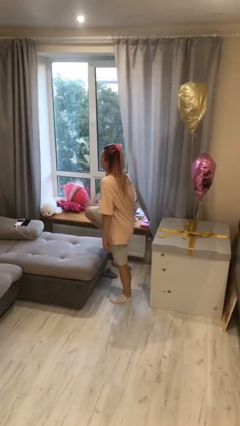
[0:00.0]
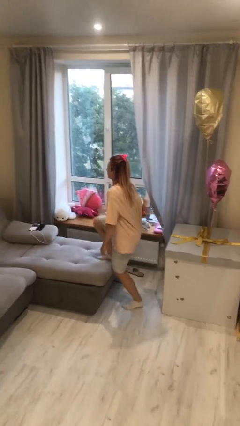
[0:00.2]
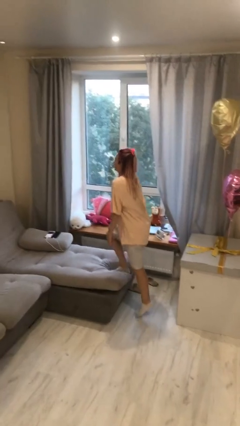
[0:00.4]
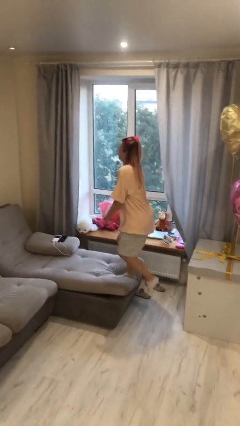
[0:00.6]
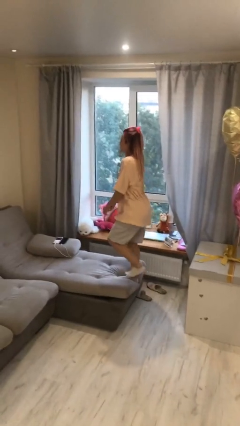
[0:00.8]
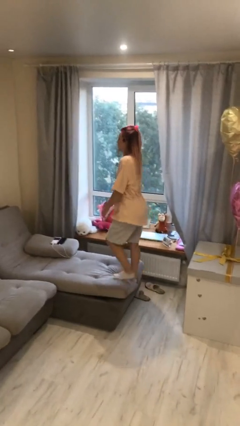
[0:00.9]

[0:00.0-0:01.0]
person climbs on couch

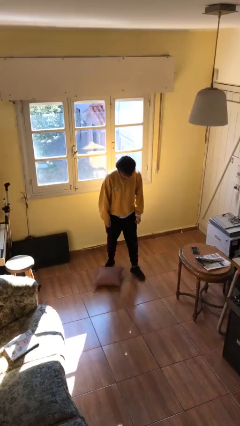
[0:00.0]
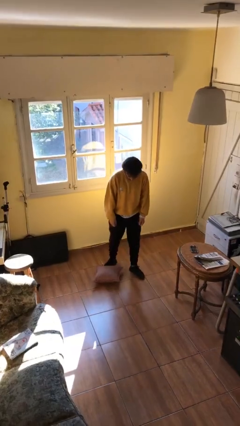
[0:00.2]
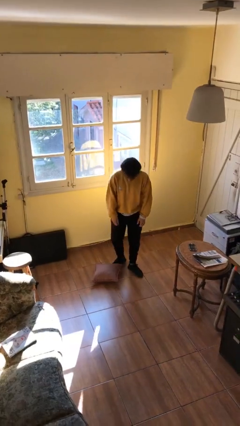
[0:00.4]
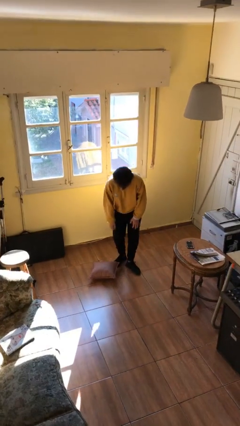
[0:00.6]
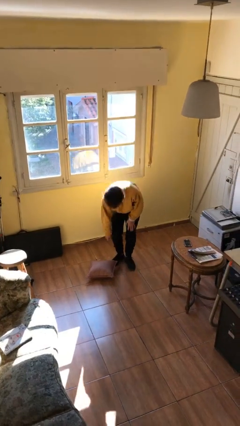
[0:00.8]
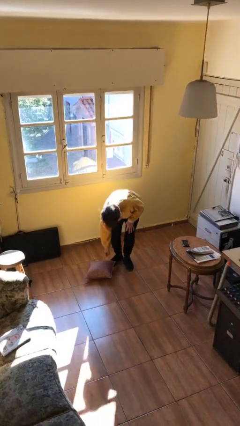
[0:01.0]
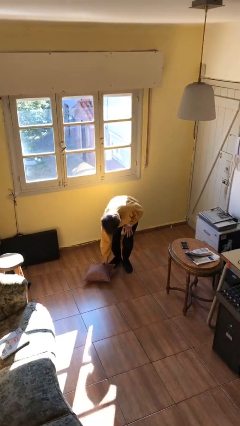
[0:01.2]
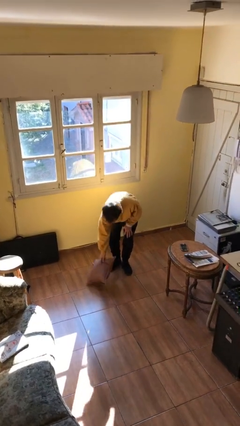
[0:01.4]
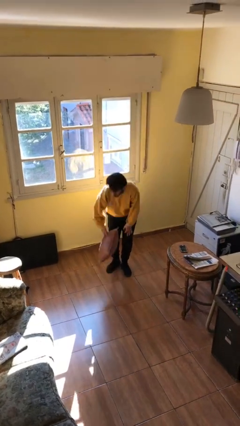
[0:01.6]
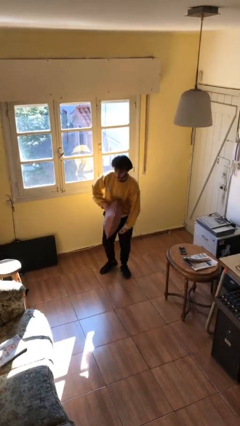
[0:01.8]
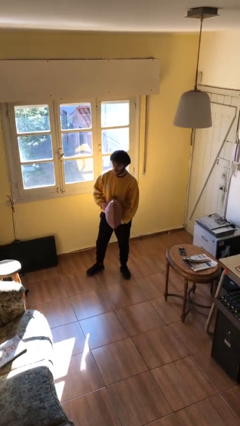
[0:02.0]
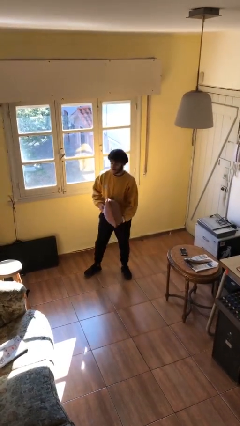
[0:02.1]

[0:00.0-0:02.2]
person picks up object from floor

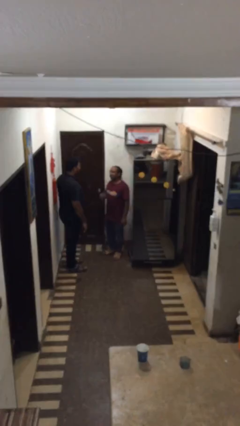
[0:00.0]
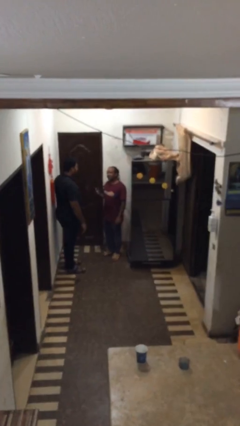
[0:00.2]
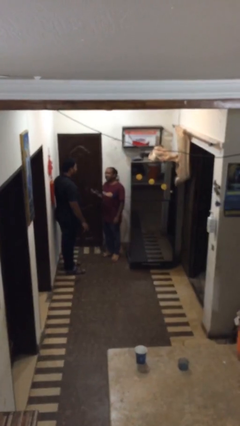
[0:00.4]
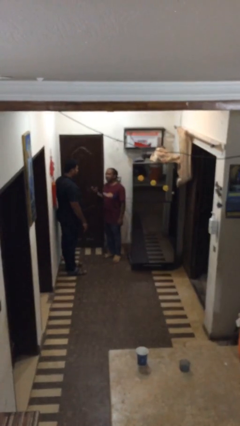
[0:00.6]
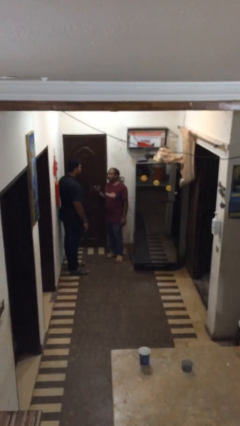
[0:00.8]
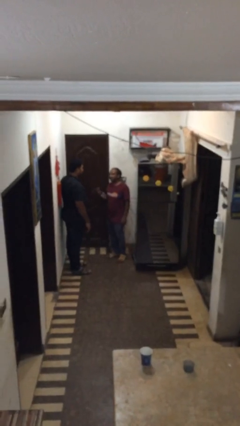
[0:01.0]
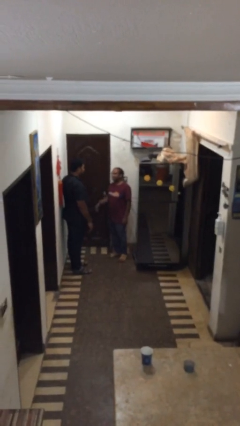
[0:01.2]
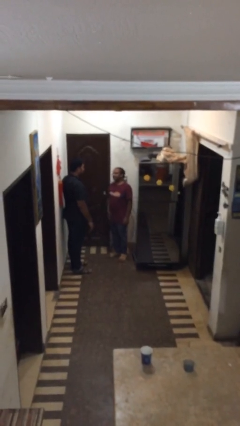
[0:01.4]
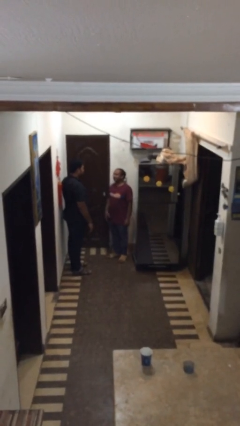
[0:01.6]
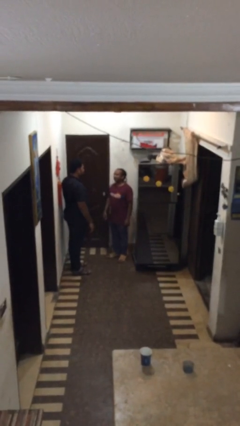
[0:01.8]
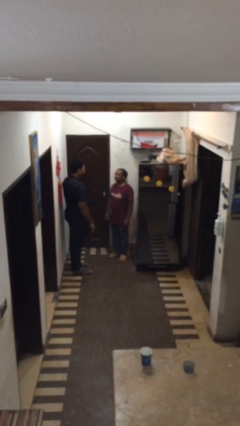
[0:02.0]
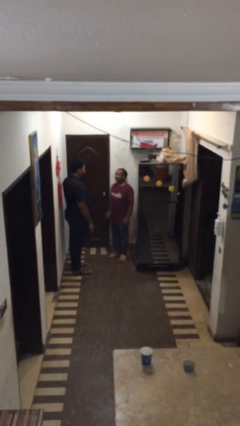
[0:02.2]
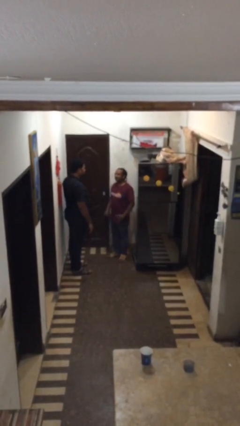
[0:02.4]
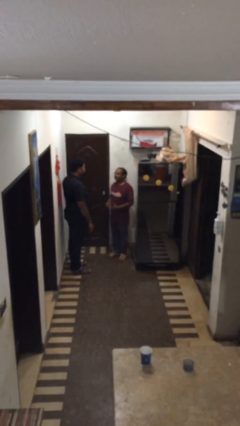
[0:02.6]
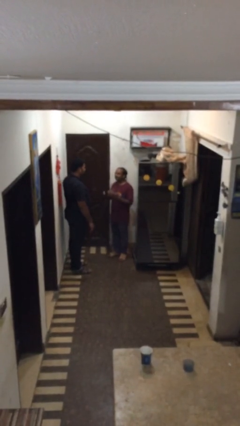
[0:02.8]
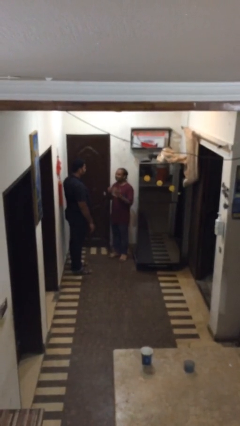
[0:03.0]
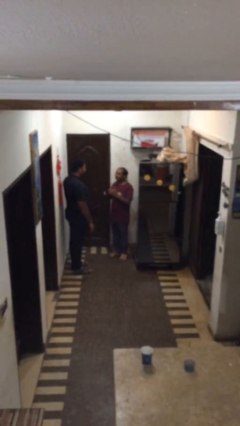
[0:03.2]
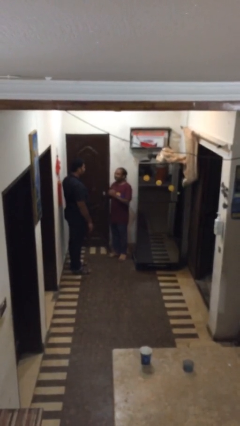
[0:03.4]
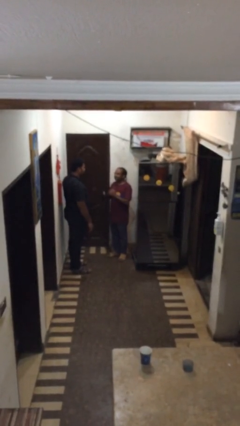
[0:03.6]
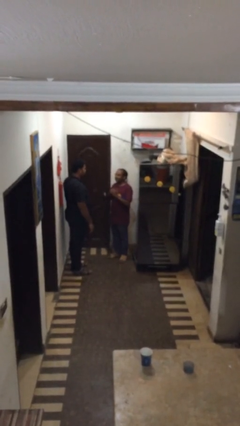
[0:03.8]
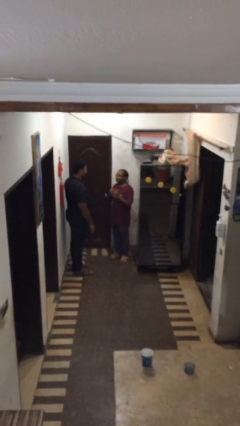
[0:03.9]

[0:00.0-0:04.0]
person talks to person

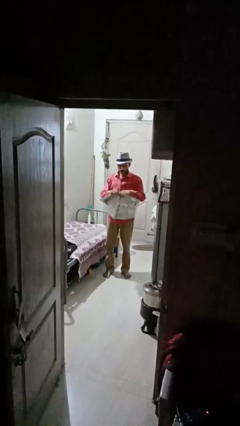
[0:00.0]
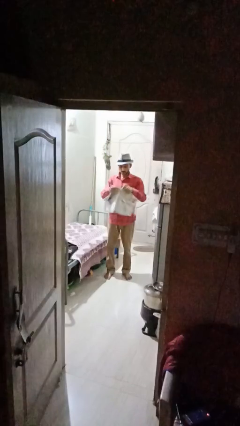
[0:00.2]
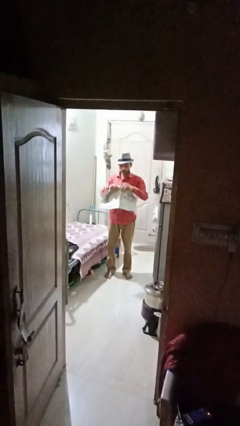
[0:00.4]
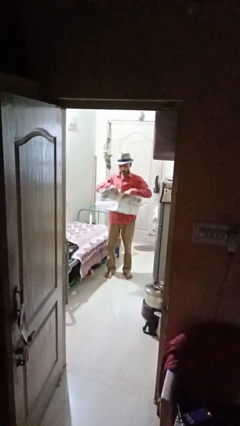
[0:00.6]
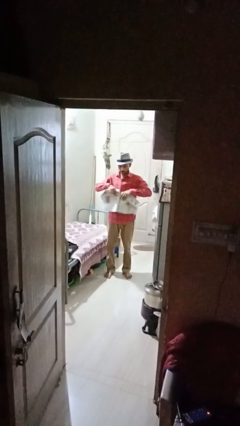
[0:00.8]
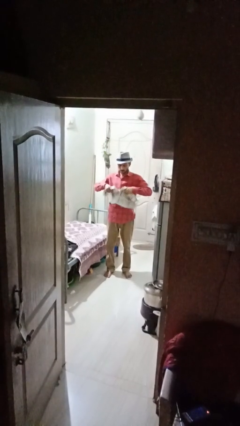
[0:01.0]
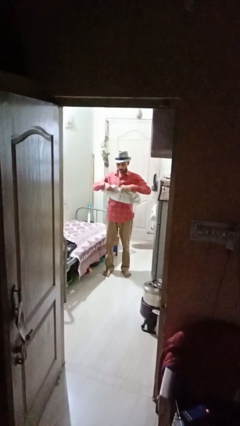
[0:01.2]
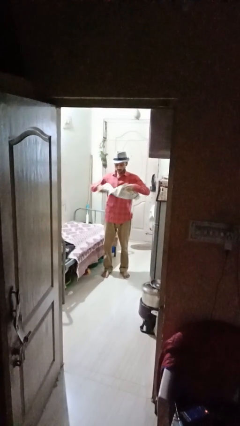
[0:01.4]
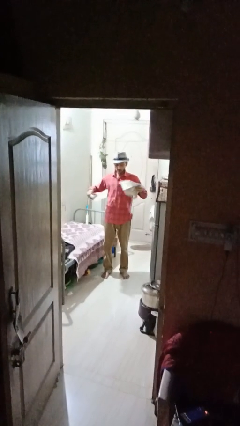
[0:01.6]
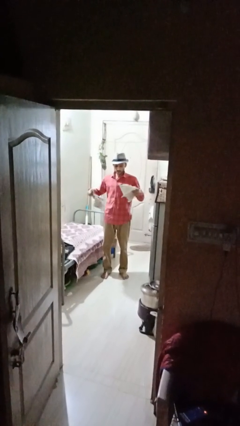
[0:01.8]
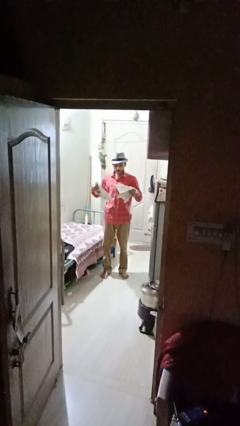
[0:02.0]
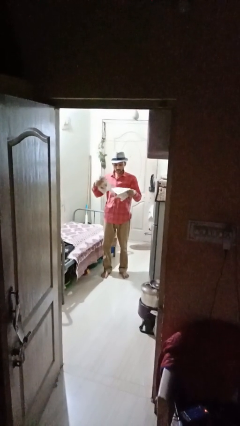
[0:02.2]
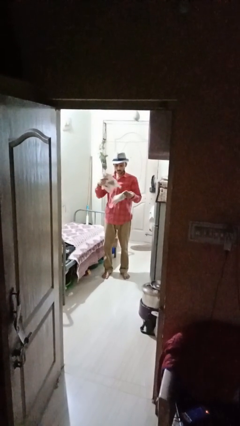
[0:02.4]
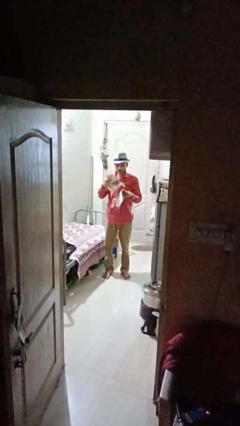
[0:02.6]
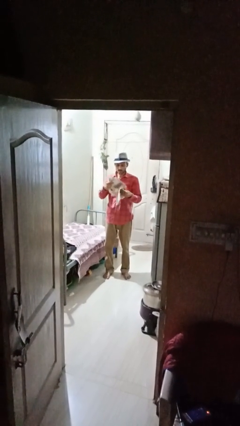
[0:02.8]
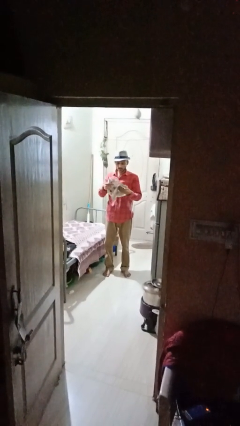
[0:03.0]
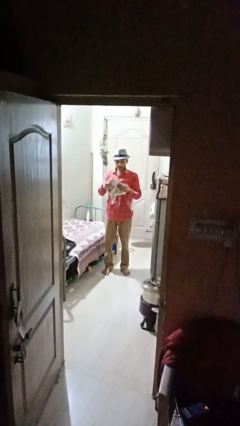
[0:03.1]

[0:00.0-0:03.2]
person tears paper

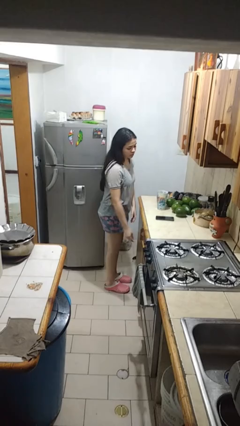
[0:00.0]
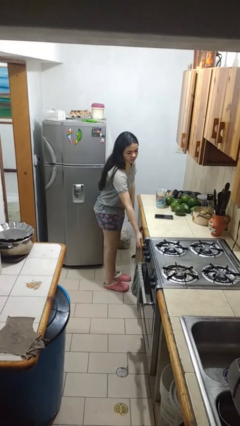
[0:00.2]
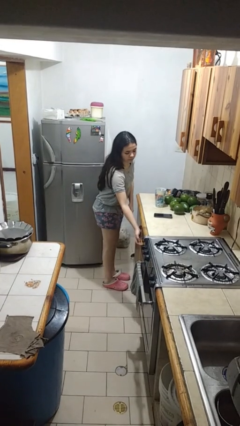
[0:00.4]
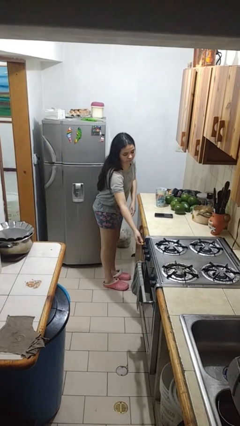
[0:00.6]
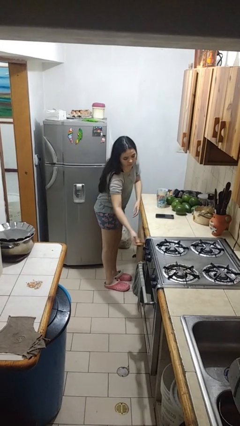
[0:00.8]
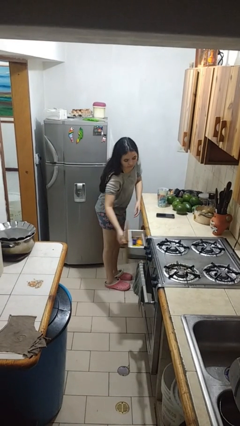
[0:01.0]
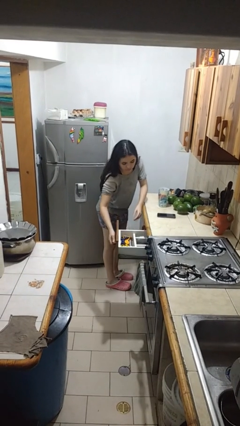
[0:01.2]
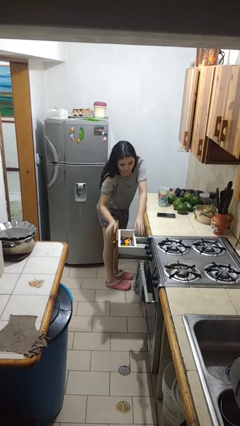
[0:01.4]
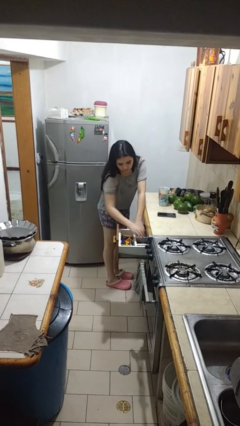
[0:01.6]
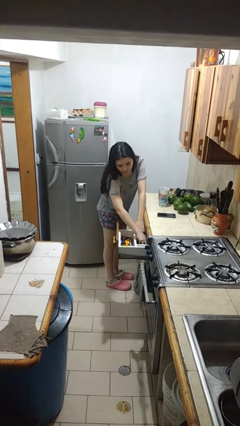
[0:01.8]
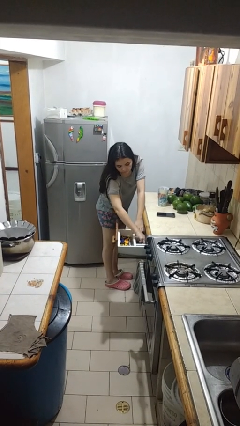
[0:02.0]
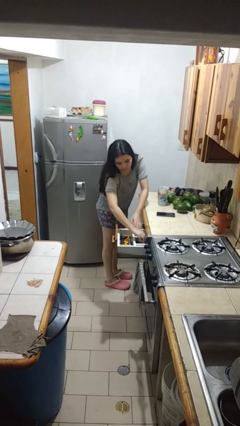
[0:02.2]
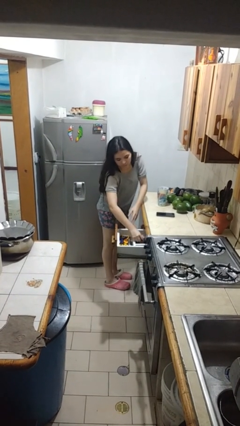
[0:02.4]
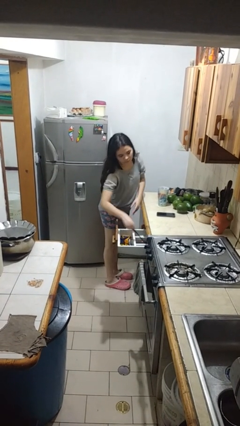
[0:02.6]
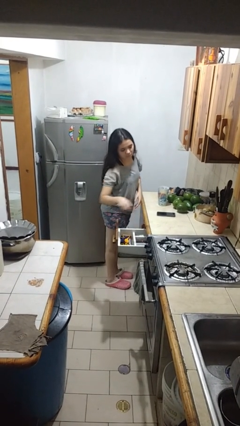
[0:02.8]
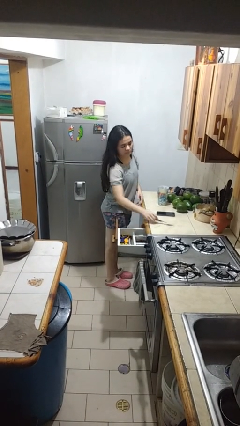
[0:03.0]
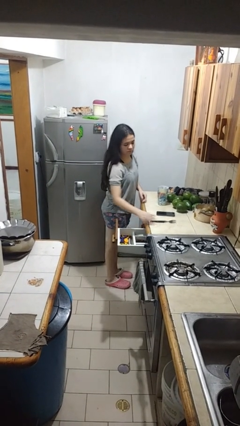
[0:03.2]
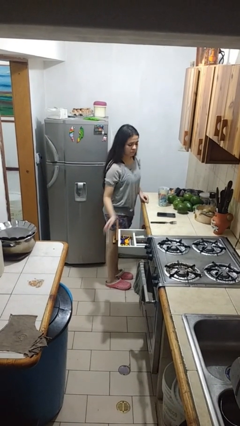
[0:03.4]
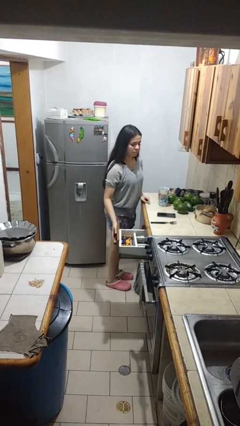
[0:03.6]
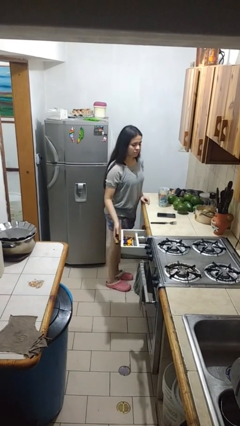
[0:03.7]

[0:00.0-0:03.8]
person takes object from kitchen drawer

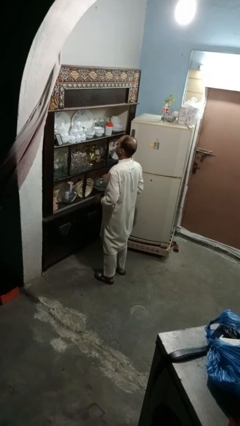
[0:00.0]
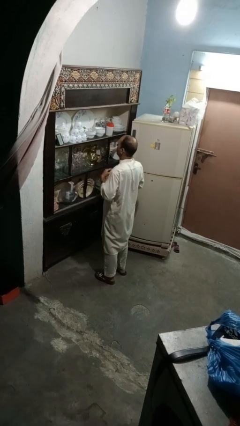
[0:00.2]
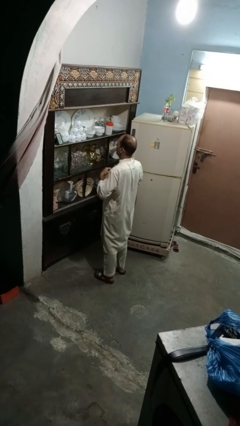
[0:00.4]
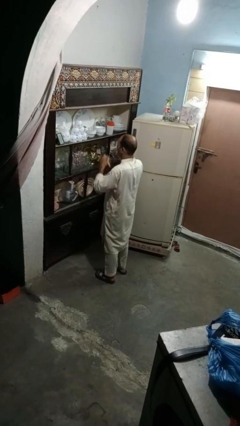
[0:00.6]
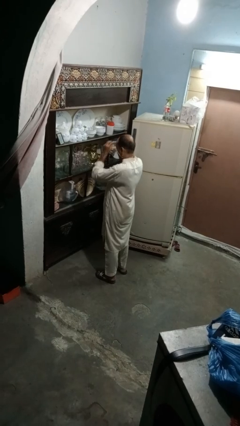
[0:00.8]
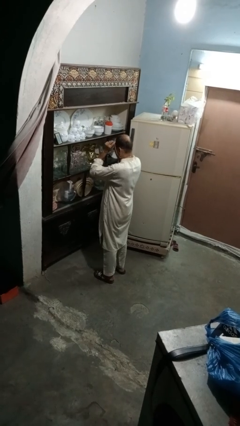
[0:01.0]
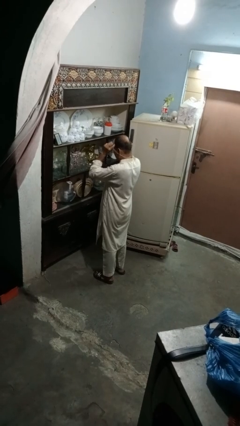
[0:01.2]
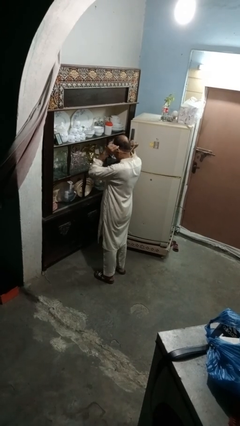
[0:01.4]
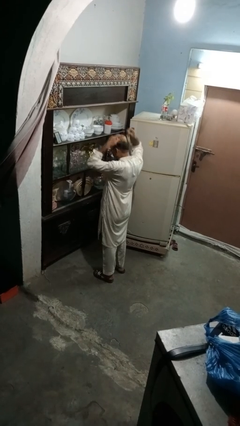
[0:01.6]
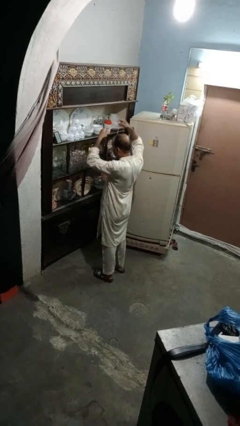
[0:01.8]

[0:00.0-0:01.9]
person takes off necklace

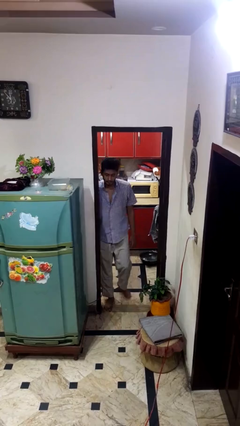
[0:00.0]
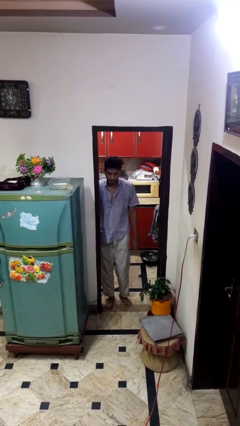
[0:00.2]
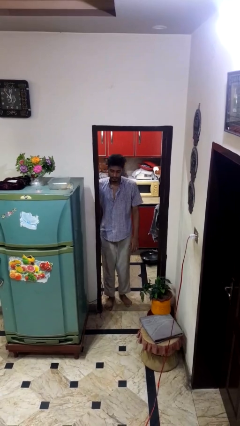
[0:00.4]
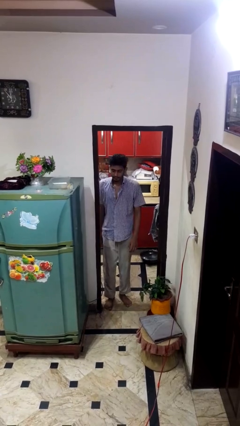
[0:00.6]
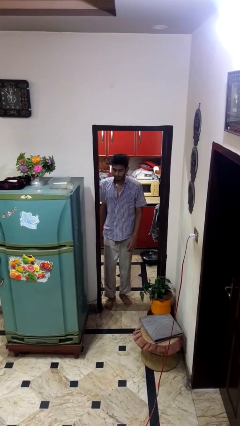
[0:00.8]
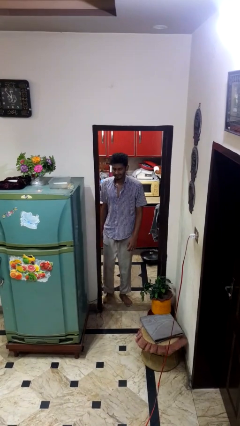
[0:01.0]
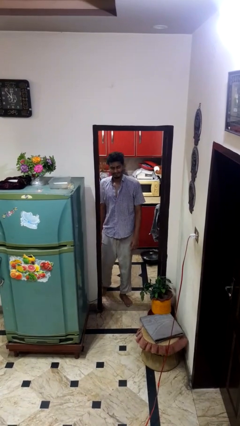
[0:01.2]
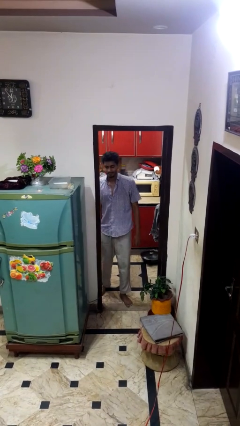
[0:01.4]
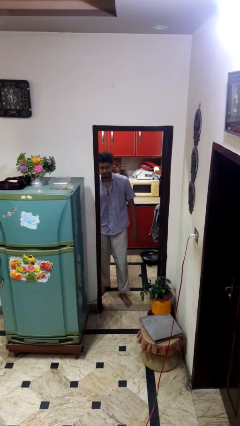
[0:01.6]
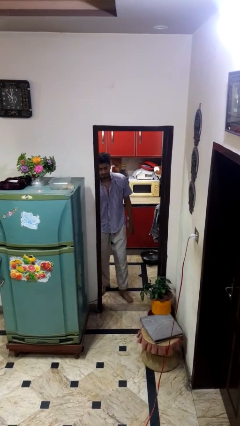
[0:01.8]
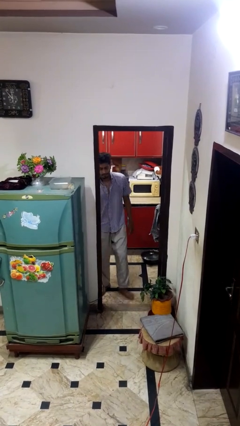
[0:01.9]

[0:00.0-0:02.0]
person bumps into wall
